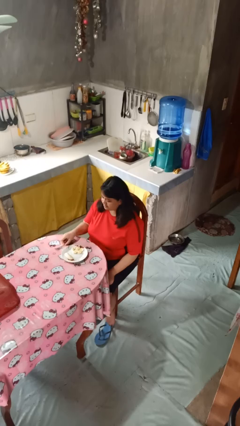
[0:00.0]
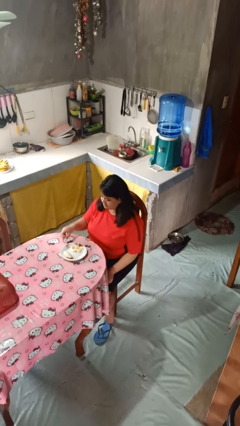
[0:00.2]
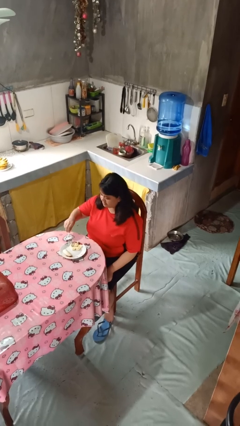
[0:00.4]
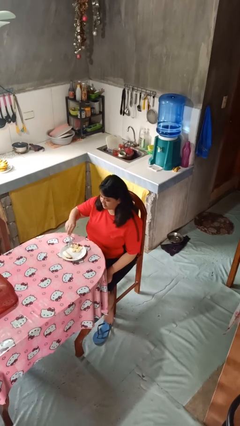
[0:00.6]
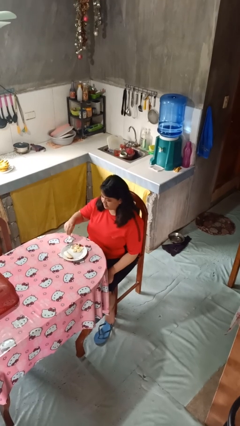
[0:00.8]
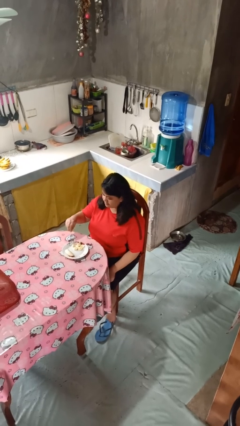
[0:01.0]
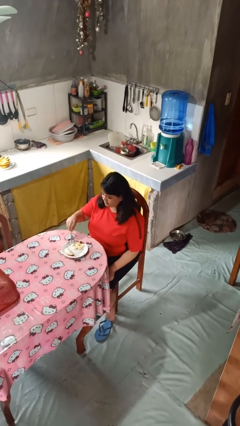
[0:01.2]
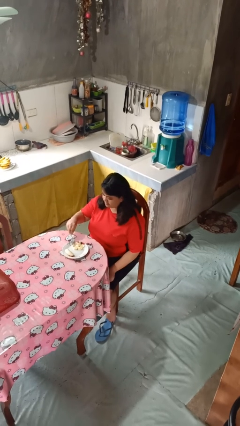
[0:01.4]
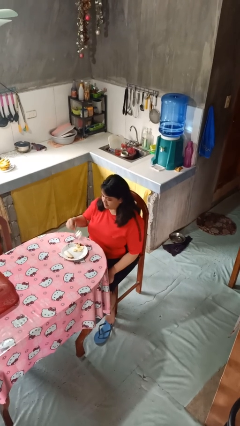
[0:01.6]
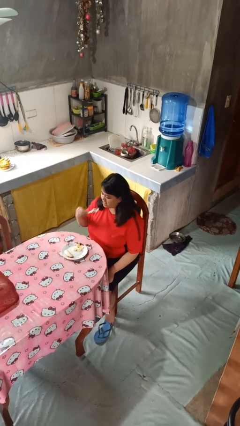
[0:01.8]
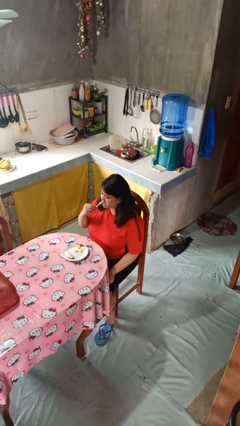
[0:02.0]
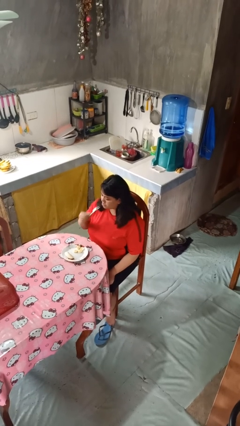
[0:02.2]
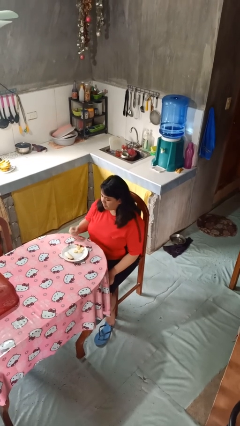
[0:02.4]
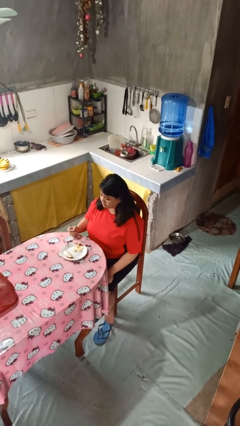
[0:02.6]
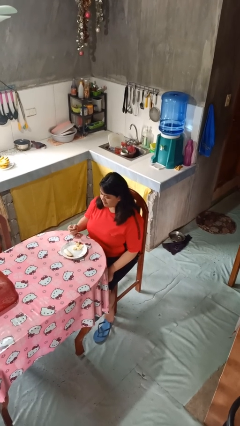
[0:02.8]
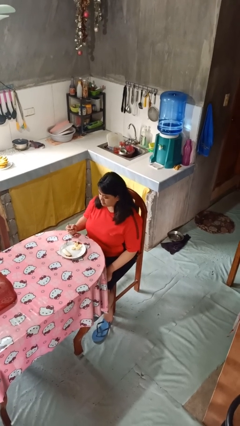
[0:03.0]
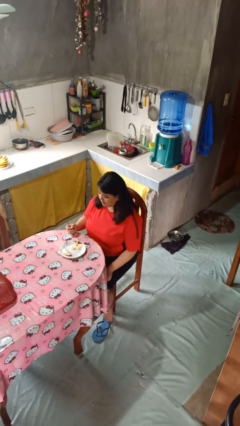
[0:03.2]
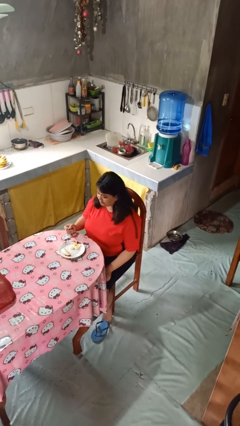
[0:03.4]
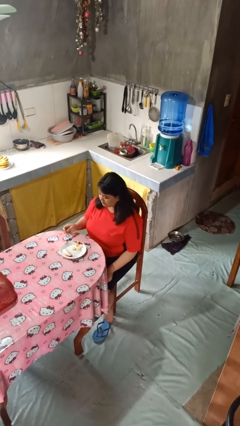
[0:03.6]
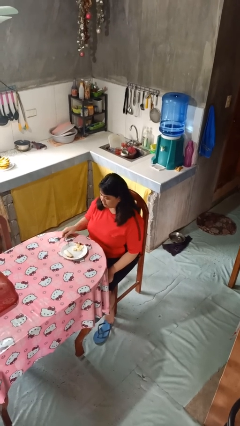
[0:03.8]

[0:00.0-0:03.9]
person eats with utensil

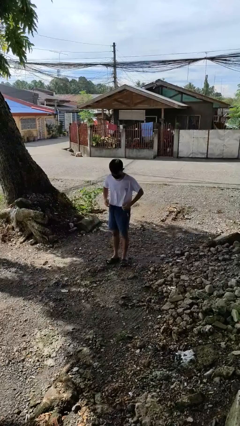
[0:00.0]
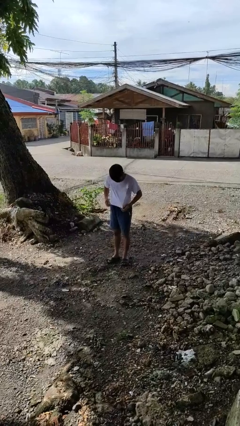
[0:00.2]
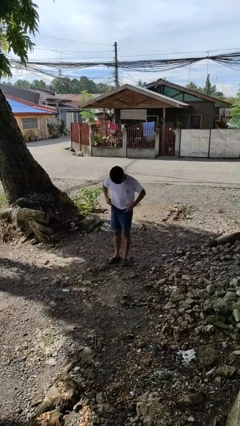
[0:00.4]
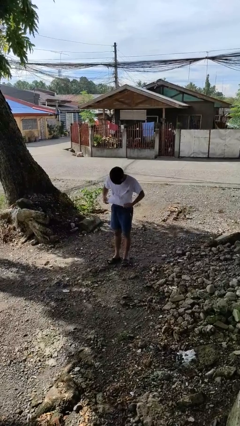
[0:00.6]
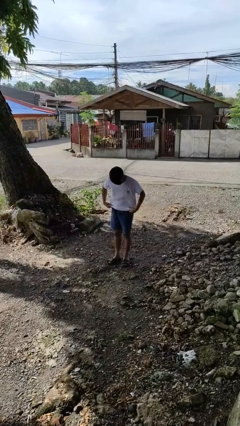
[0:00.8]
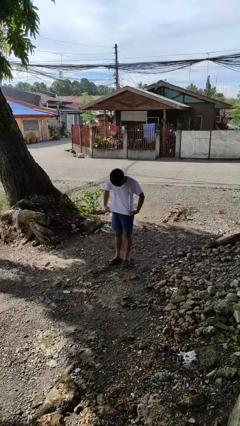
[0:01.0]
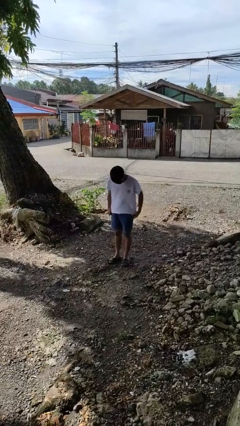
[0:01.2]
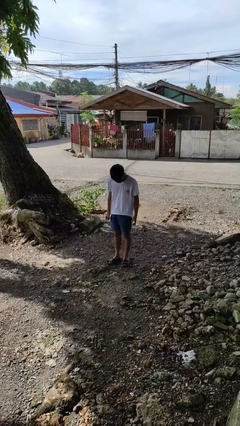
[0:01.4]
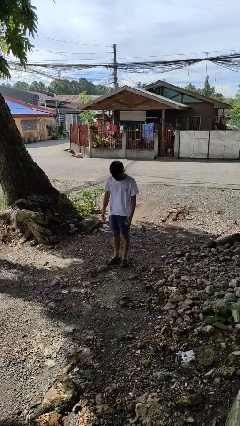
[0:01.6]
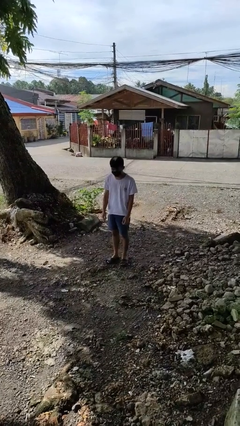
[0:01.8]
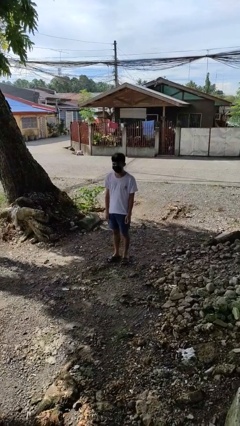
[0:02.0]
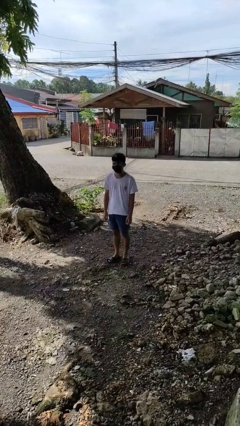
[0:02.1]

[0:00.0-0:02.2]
person untucks shirt

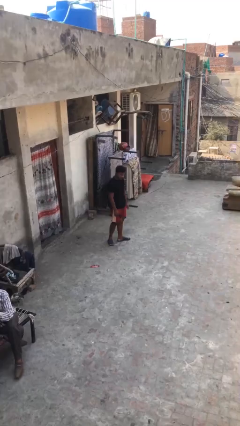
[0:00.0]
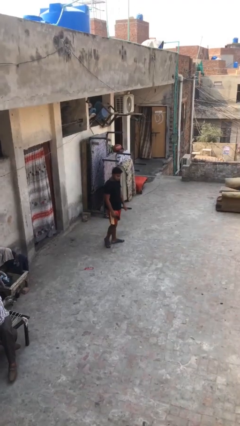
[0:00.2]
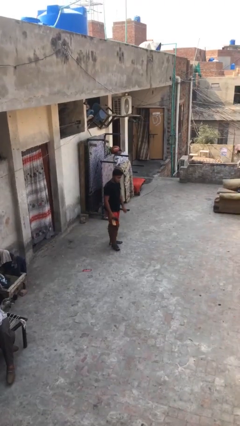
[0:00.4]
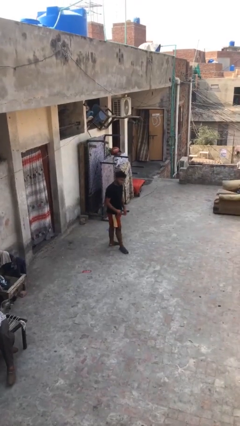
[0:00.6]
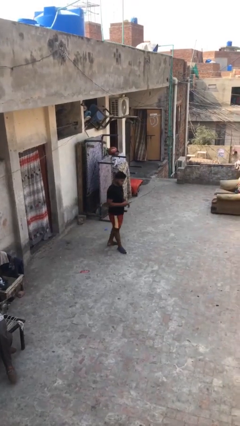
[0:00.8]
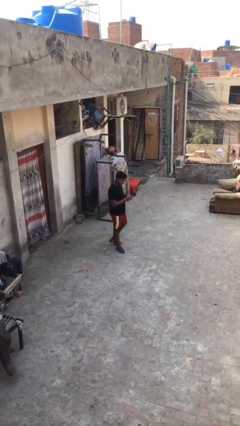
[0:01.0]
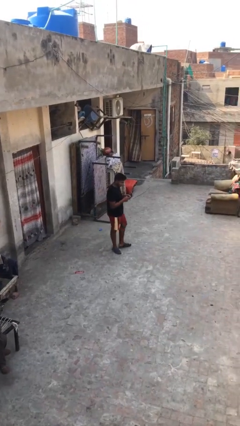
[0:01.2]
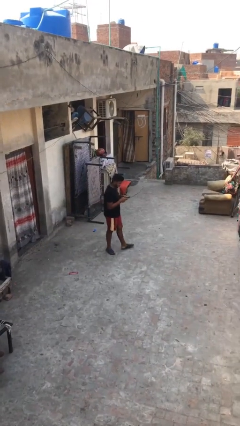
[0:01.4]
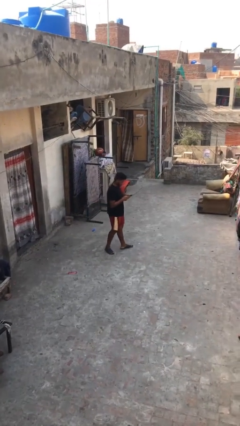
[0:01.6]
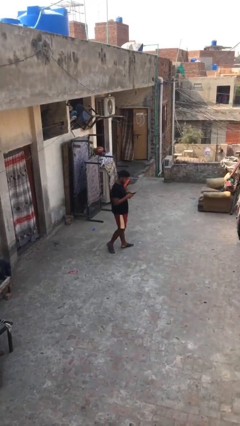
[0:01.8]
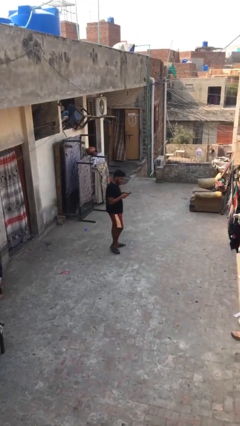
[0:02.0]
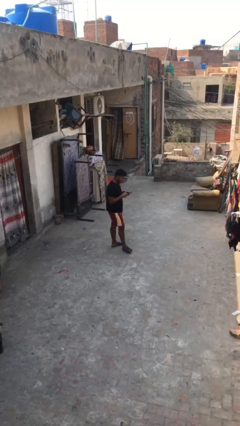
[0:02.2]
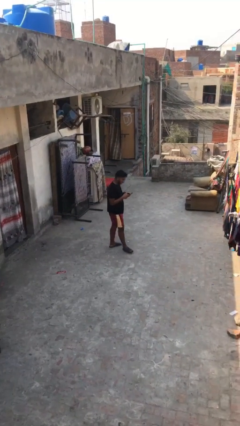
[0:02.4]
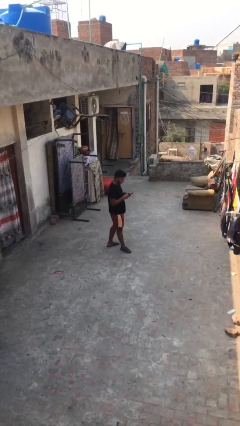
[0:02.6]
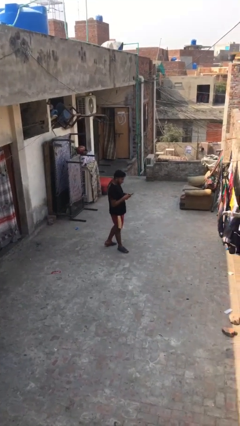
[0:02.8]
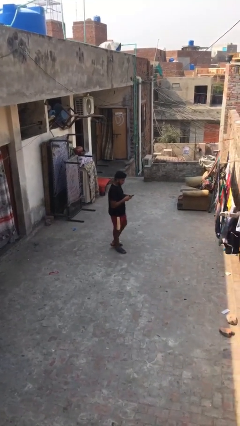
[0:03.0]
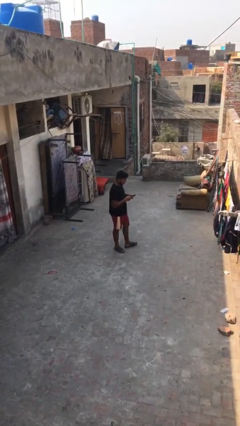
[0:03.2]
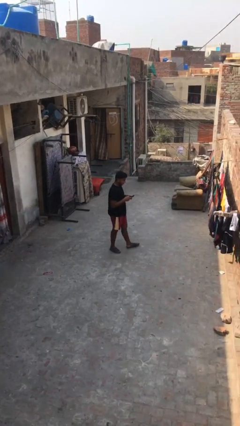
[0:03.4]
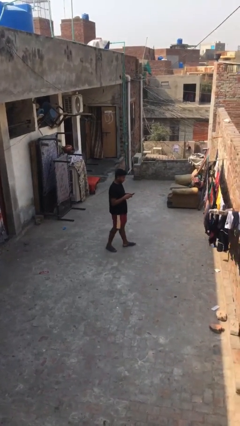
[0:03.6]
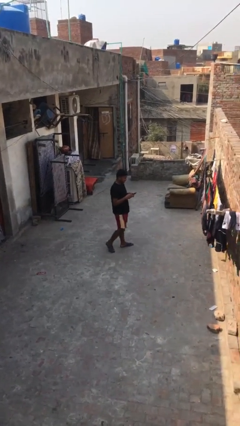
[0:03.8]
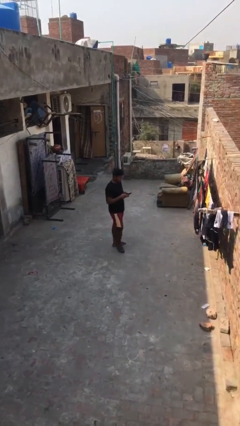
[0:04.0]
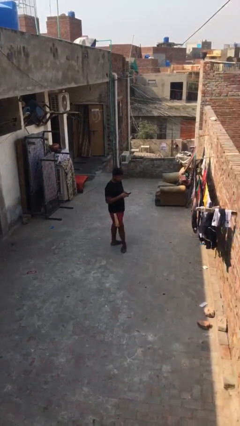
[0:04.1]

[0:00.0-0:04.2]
person texts on phone

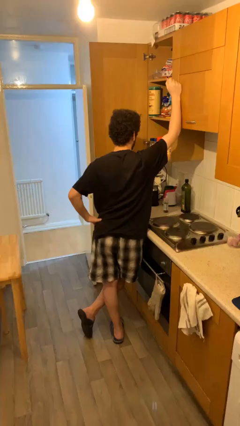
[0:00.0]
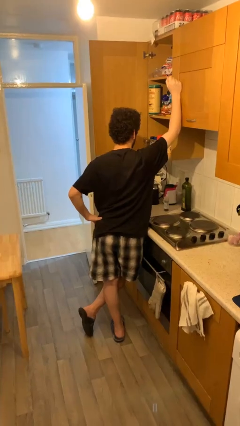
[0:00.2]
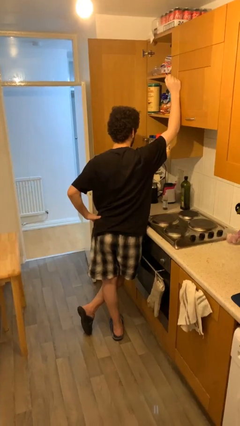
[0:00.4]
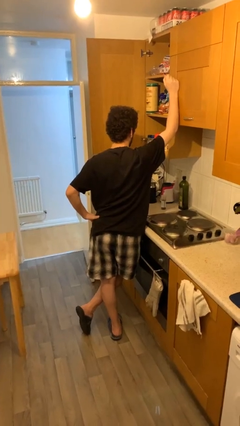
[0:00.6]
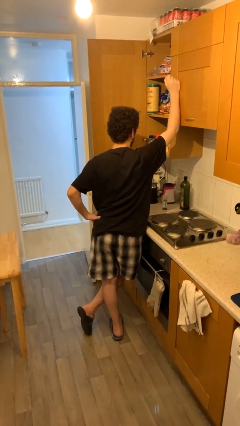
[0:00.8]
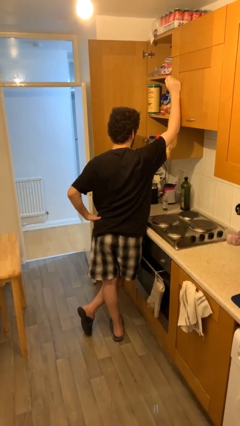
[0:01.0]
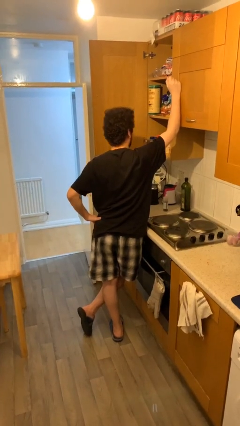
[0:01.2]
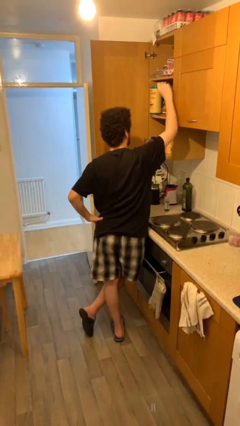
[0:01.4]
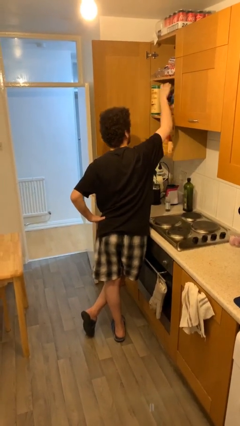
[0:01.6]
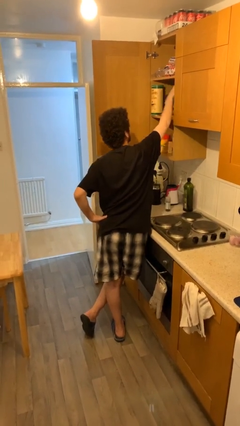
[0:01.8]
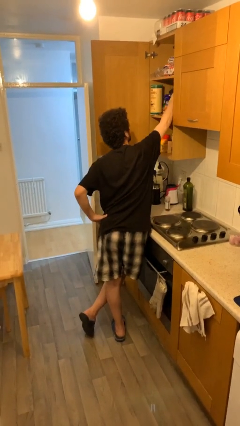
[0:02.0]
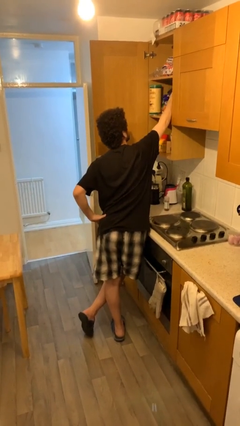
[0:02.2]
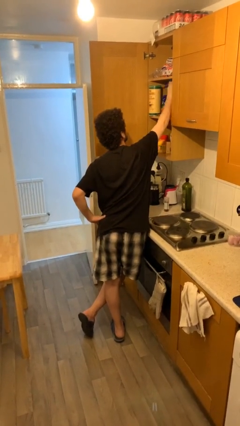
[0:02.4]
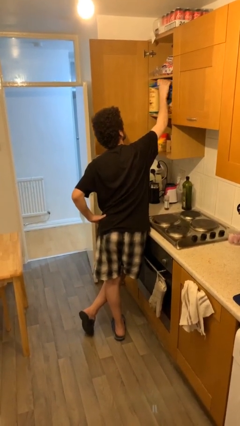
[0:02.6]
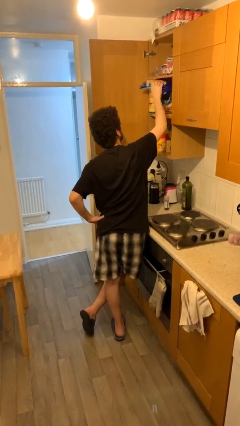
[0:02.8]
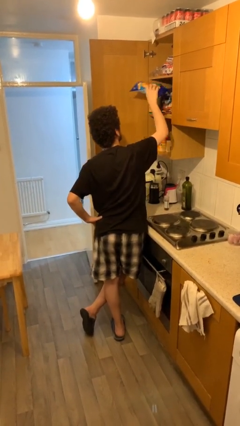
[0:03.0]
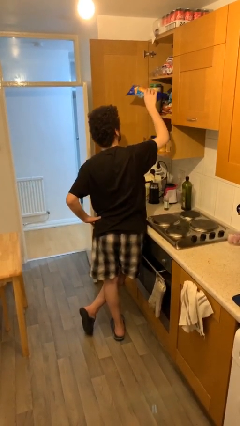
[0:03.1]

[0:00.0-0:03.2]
person picks up object from shelf

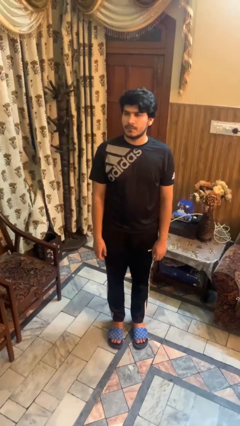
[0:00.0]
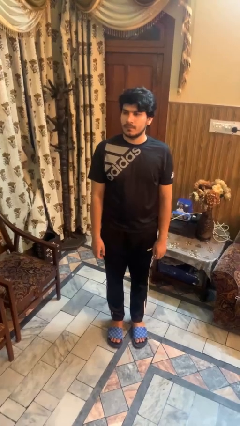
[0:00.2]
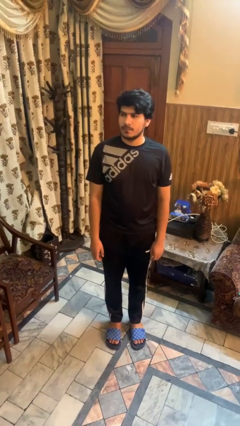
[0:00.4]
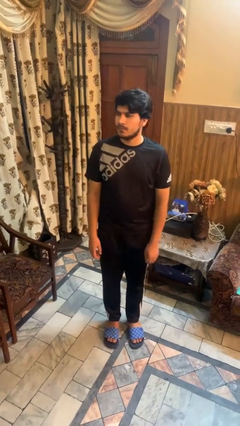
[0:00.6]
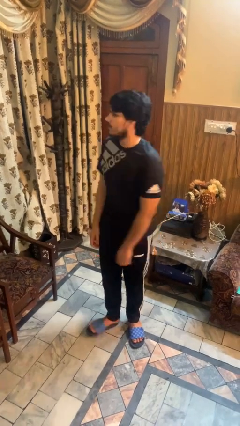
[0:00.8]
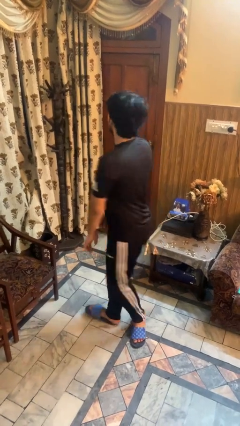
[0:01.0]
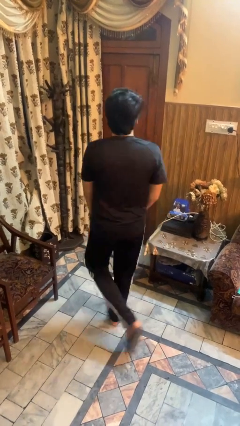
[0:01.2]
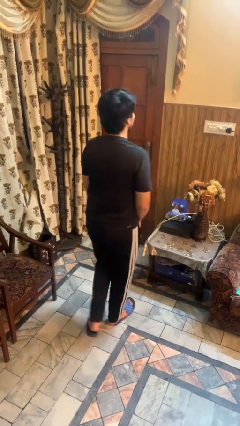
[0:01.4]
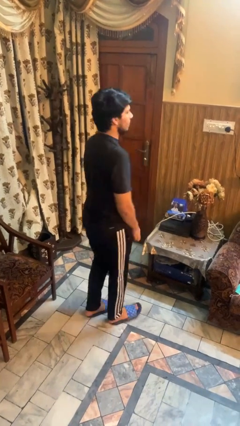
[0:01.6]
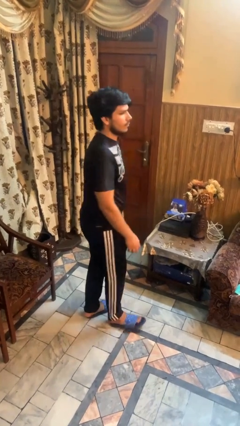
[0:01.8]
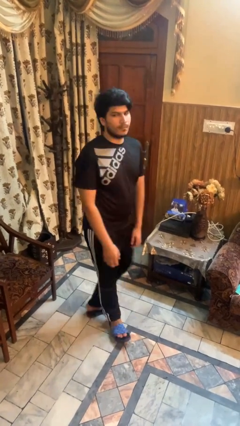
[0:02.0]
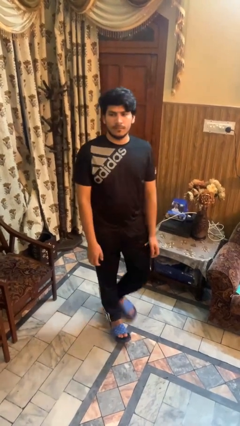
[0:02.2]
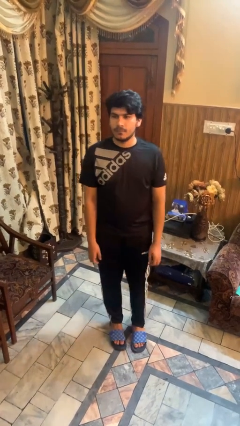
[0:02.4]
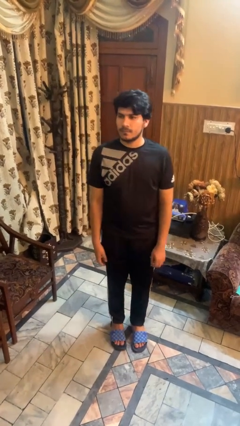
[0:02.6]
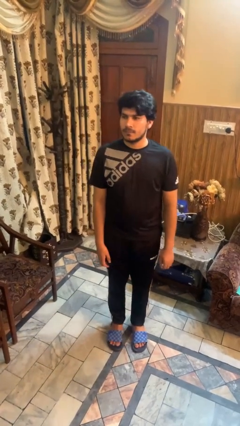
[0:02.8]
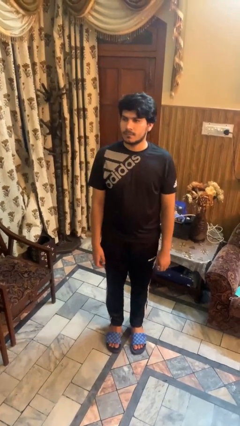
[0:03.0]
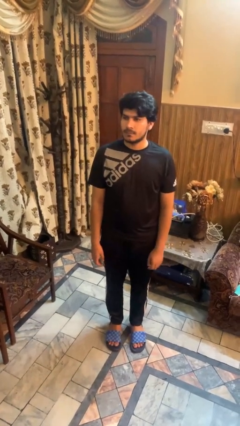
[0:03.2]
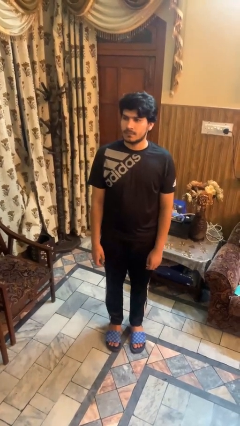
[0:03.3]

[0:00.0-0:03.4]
person twirls

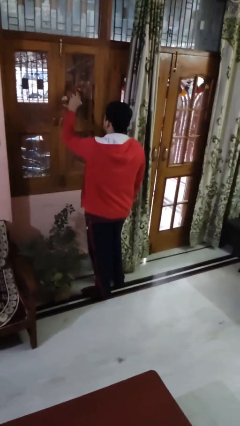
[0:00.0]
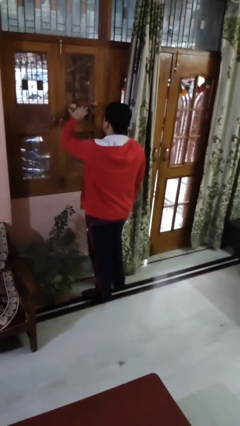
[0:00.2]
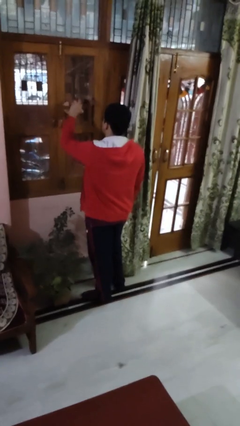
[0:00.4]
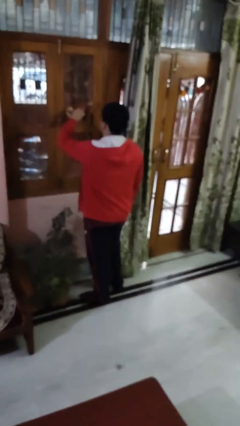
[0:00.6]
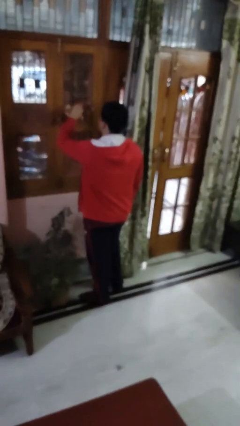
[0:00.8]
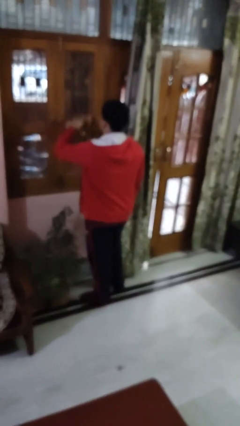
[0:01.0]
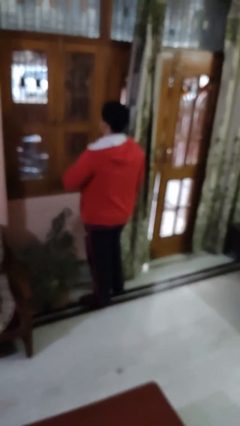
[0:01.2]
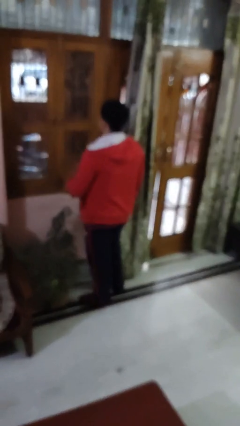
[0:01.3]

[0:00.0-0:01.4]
person washes window
